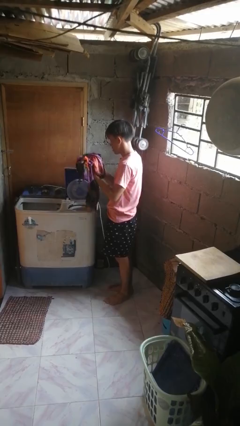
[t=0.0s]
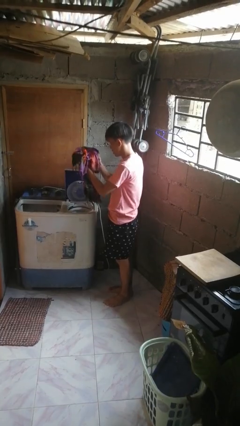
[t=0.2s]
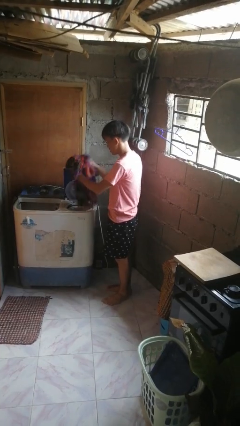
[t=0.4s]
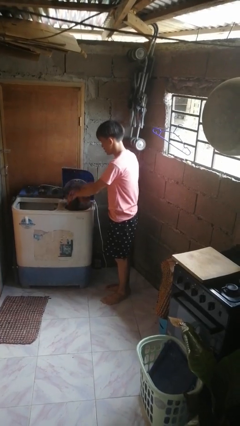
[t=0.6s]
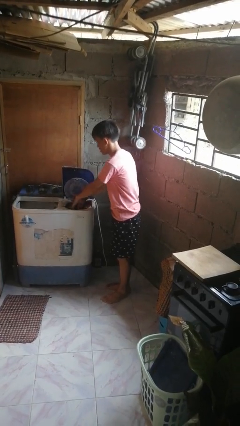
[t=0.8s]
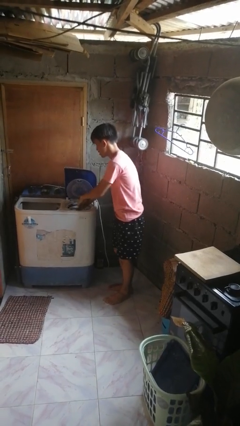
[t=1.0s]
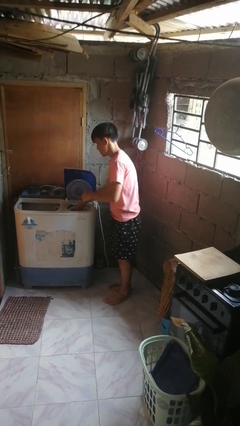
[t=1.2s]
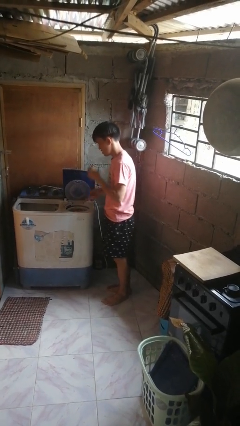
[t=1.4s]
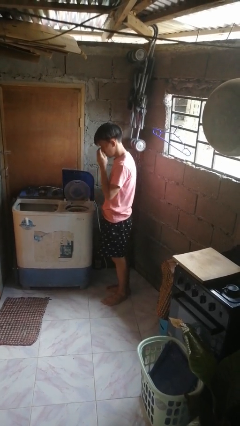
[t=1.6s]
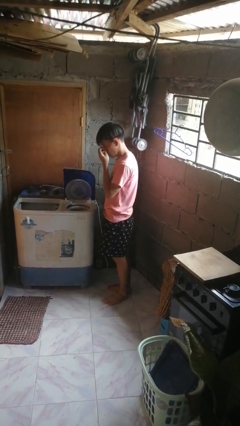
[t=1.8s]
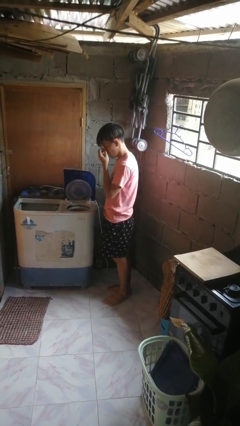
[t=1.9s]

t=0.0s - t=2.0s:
person loads dryer

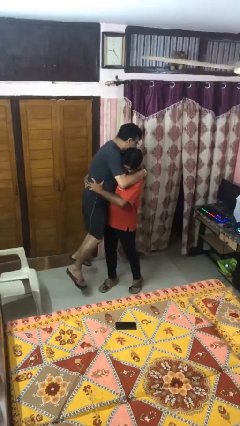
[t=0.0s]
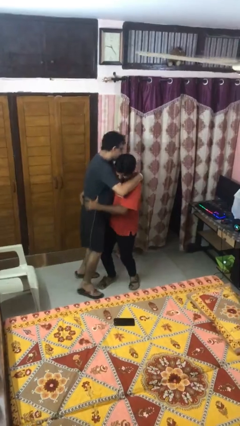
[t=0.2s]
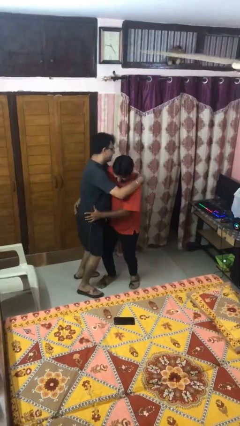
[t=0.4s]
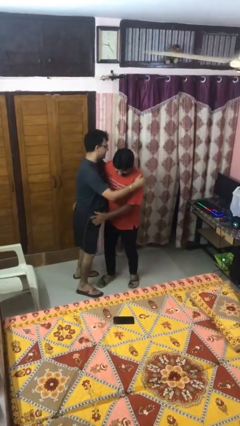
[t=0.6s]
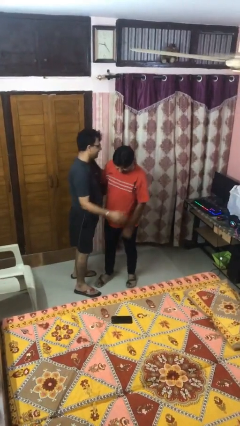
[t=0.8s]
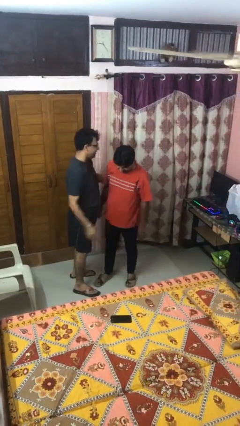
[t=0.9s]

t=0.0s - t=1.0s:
person puts down person

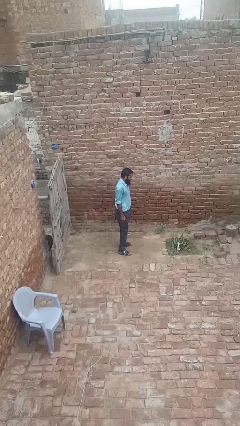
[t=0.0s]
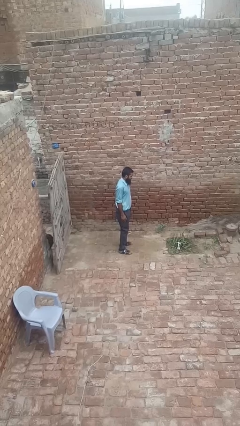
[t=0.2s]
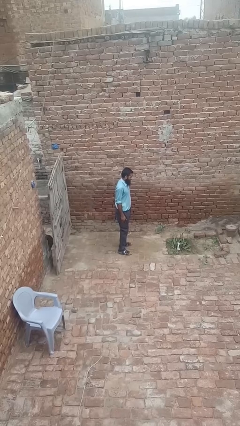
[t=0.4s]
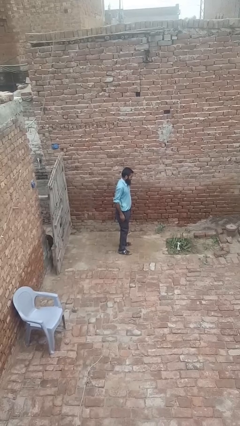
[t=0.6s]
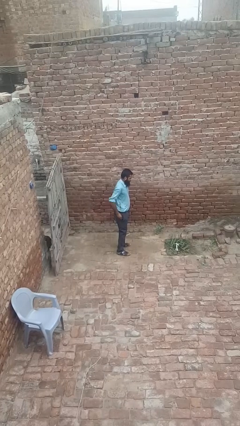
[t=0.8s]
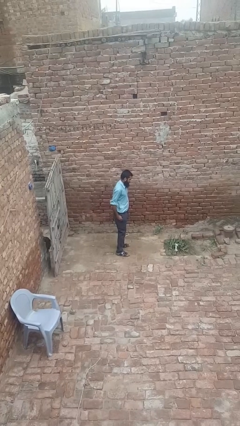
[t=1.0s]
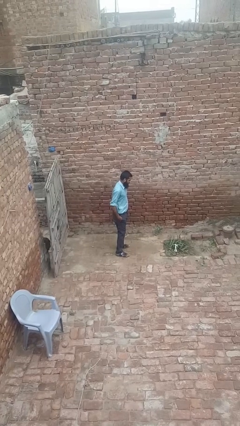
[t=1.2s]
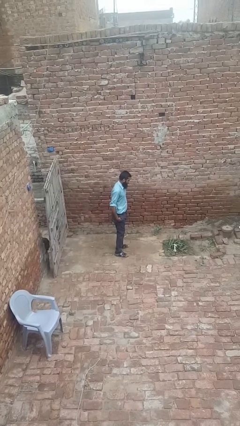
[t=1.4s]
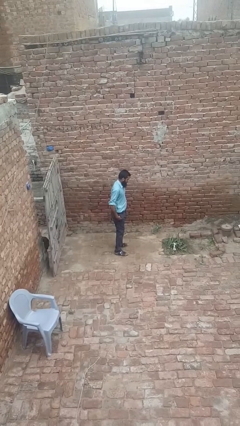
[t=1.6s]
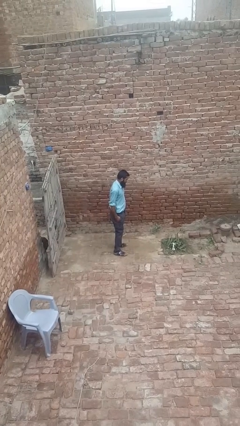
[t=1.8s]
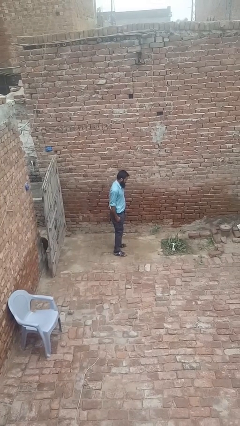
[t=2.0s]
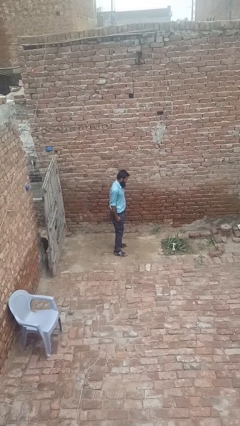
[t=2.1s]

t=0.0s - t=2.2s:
person puts hands in back pockets

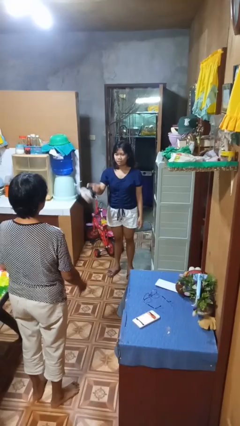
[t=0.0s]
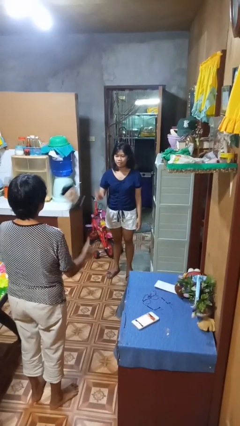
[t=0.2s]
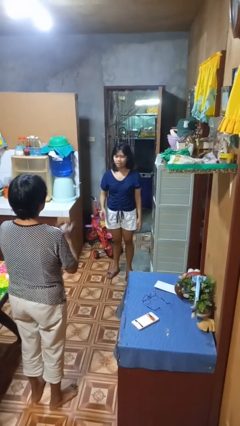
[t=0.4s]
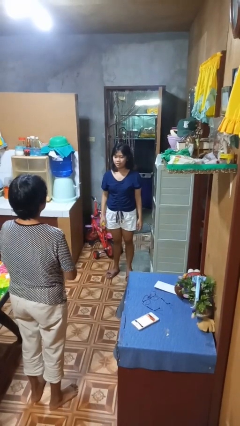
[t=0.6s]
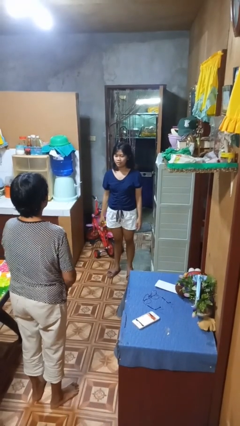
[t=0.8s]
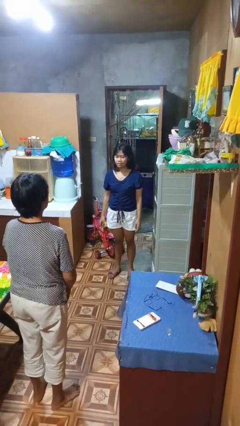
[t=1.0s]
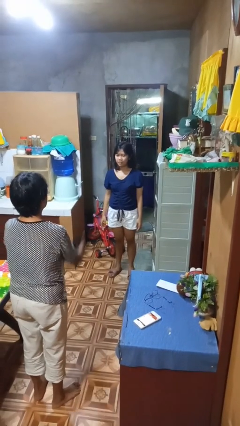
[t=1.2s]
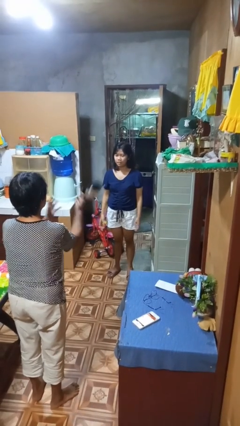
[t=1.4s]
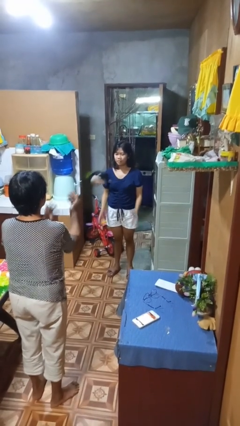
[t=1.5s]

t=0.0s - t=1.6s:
person throws object to person

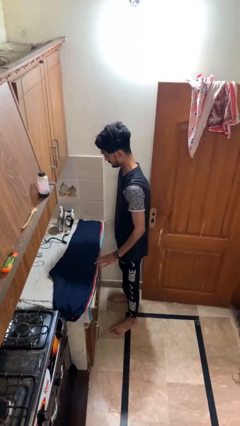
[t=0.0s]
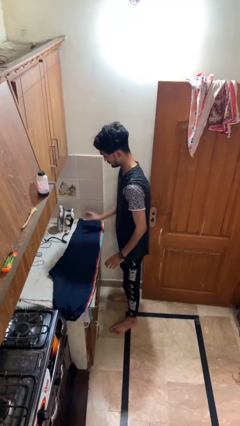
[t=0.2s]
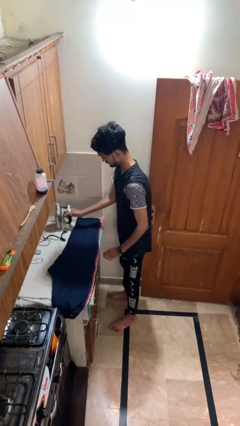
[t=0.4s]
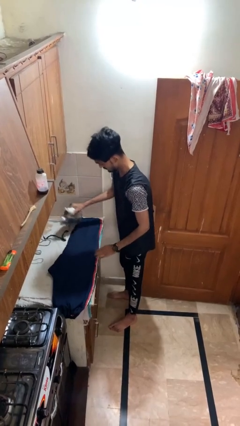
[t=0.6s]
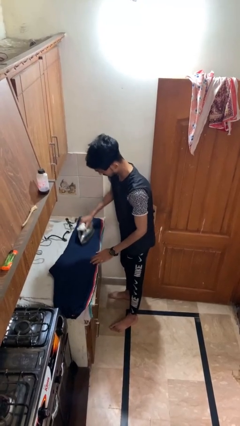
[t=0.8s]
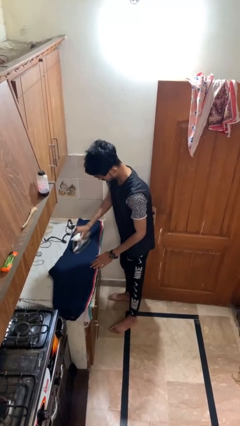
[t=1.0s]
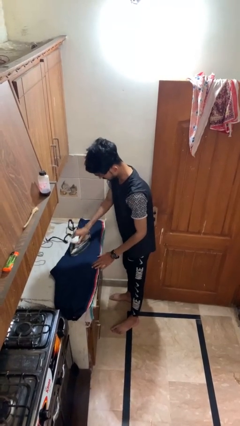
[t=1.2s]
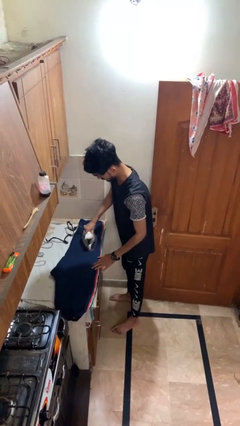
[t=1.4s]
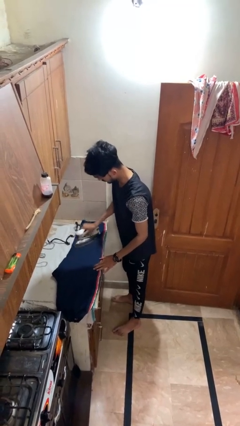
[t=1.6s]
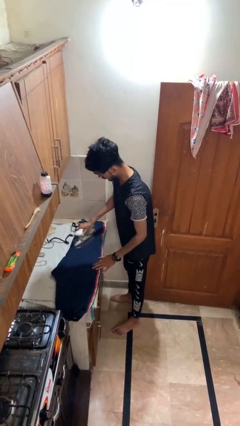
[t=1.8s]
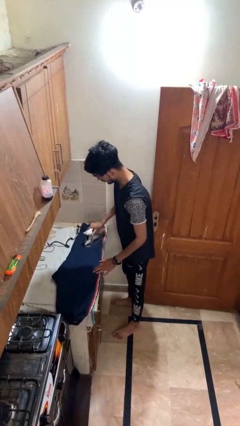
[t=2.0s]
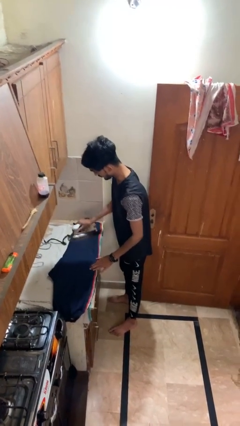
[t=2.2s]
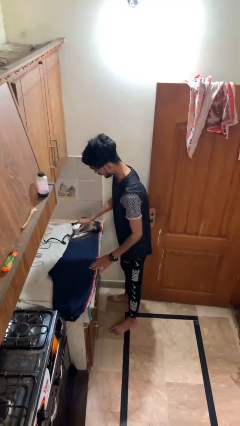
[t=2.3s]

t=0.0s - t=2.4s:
person irons clothes

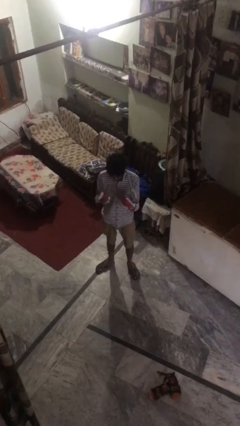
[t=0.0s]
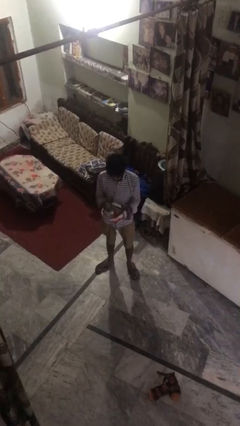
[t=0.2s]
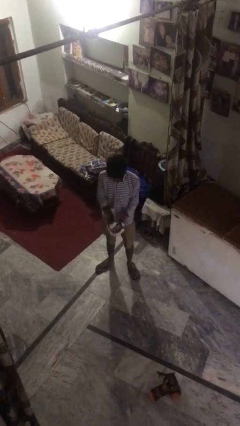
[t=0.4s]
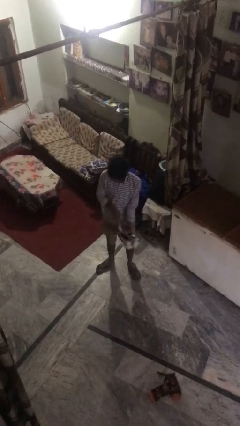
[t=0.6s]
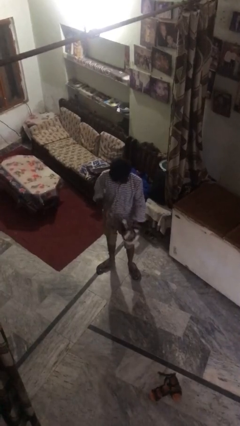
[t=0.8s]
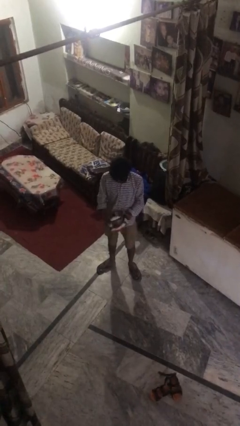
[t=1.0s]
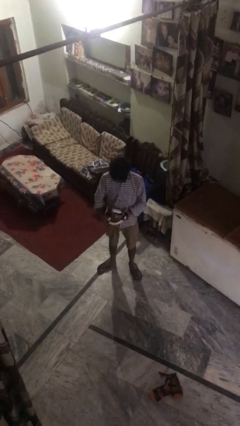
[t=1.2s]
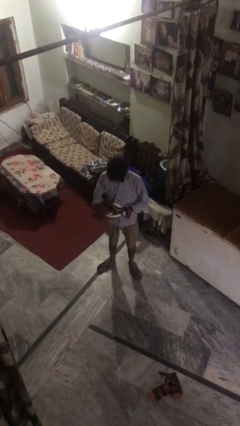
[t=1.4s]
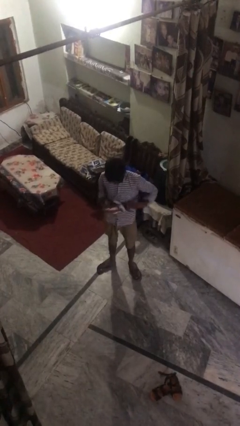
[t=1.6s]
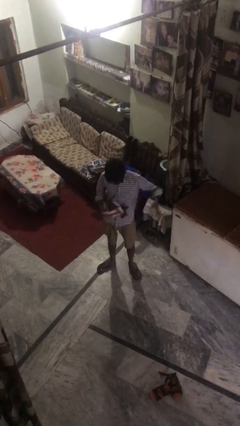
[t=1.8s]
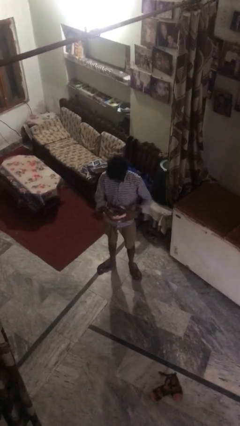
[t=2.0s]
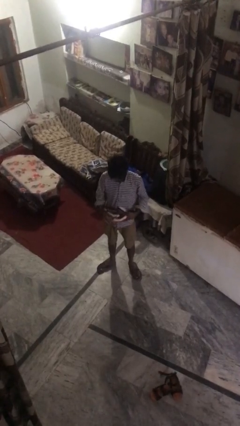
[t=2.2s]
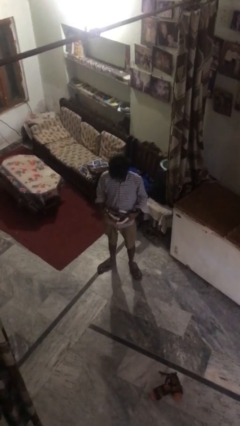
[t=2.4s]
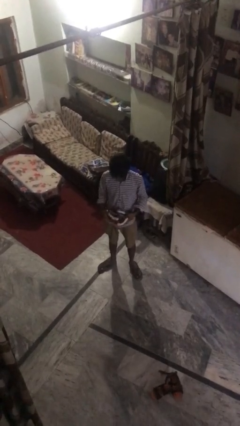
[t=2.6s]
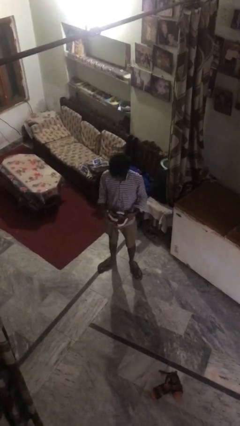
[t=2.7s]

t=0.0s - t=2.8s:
person takes off gloves

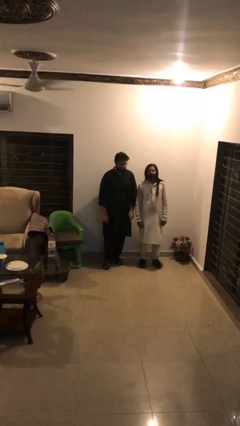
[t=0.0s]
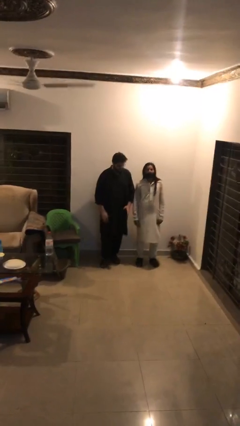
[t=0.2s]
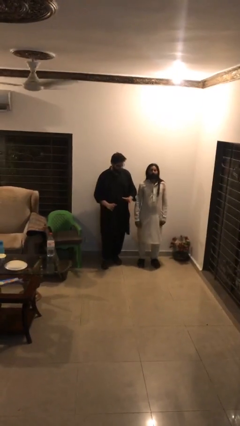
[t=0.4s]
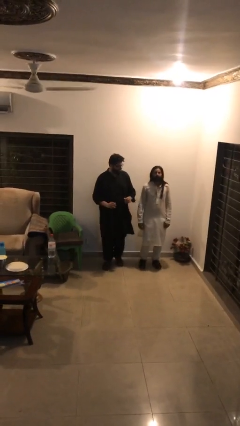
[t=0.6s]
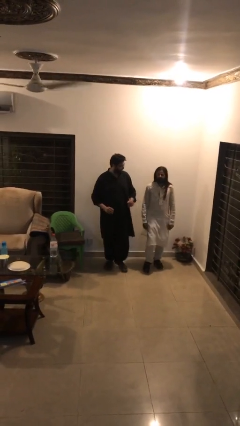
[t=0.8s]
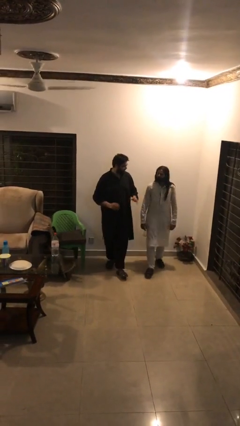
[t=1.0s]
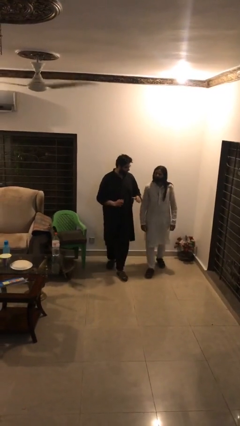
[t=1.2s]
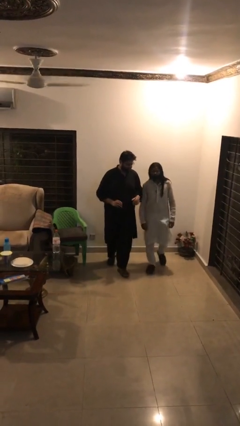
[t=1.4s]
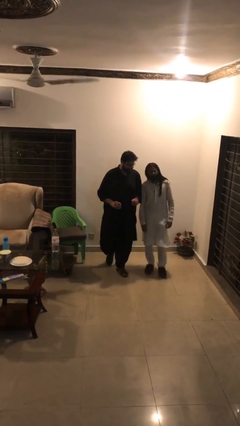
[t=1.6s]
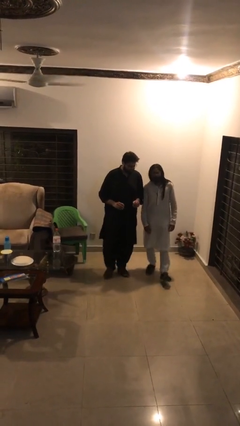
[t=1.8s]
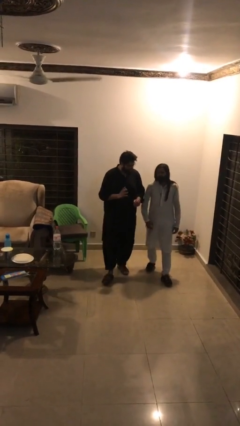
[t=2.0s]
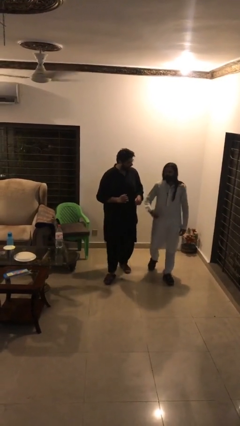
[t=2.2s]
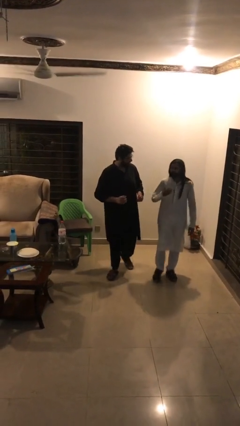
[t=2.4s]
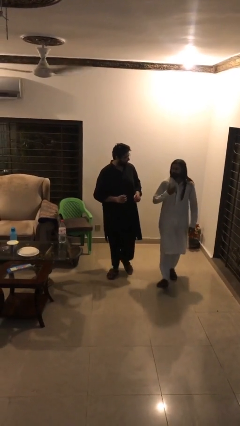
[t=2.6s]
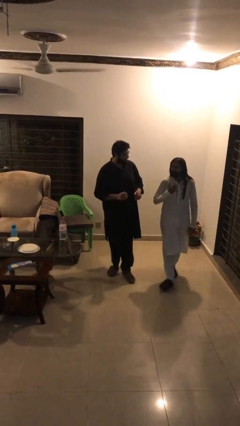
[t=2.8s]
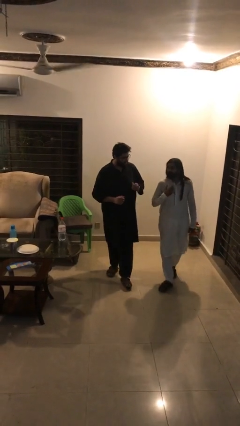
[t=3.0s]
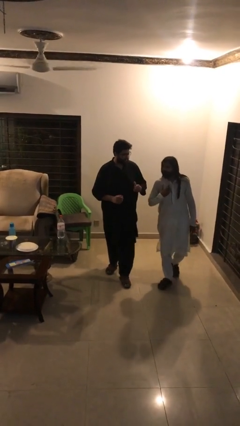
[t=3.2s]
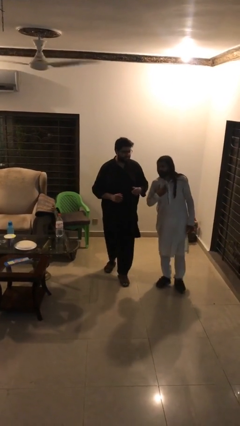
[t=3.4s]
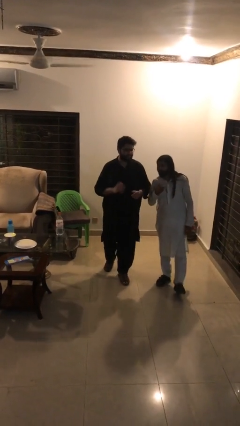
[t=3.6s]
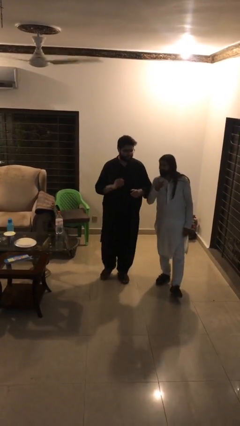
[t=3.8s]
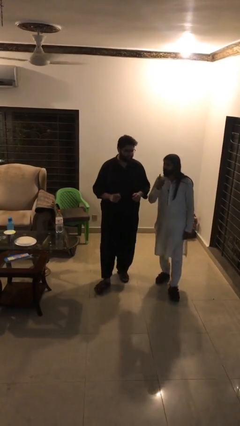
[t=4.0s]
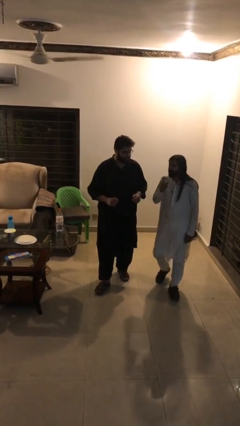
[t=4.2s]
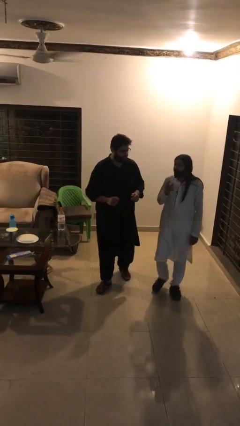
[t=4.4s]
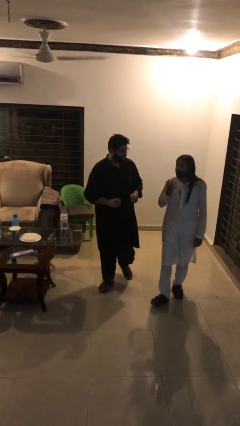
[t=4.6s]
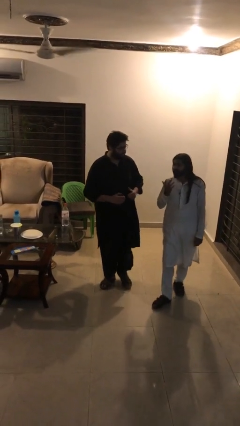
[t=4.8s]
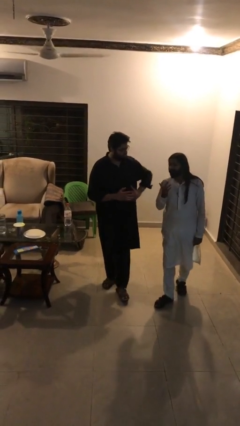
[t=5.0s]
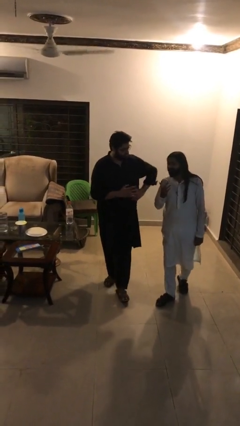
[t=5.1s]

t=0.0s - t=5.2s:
person talks to person
